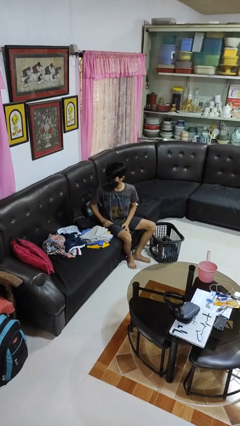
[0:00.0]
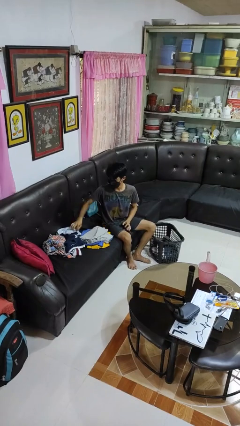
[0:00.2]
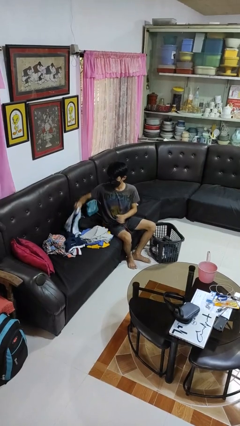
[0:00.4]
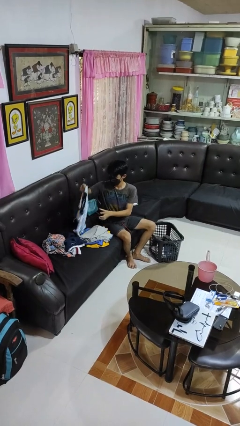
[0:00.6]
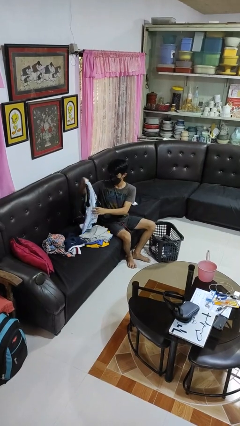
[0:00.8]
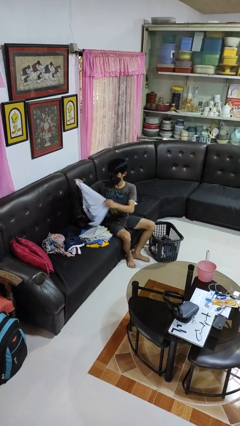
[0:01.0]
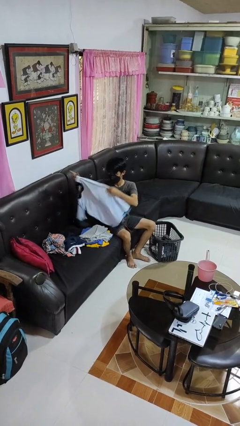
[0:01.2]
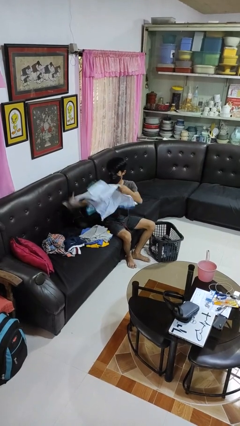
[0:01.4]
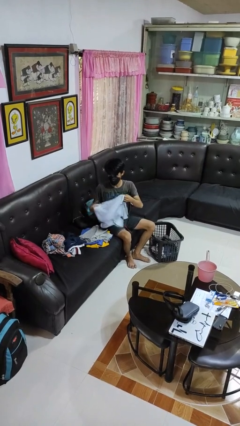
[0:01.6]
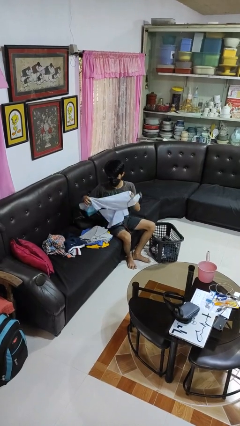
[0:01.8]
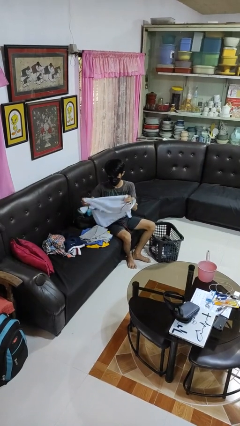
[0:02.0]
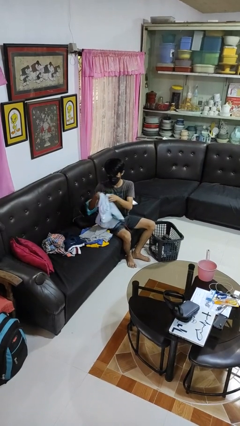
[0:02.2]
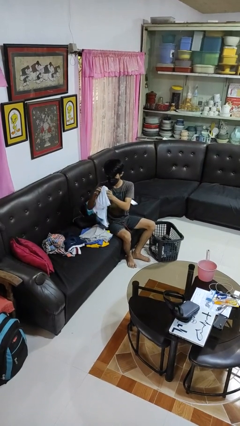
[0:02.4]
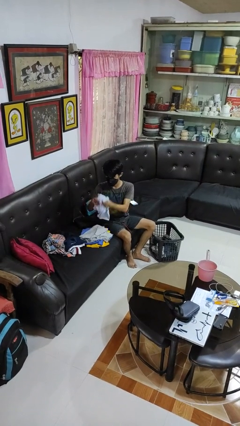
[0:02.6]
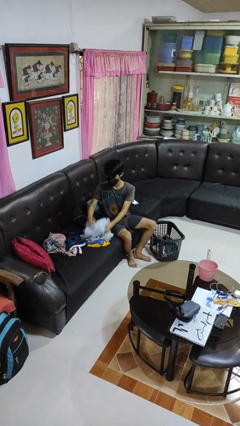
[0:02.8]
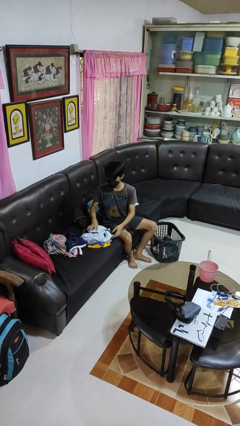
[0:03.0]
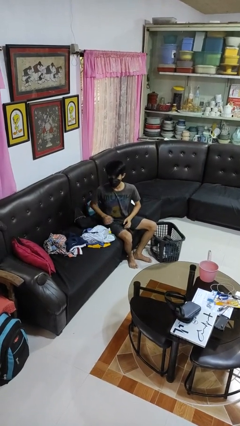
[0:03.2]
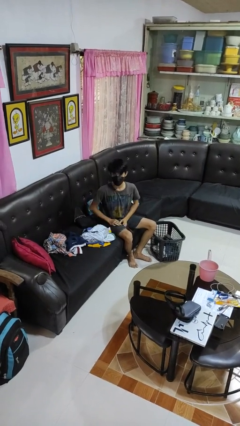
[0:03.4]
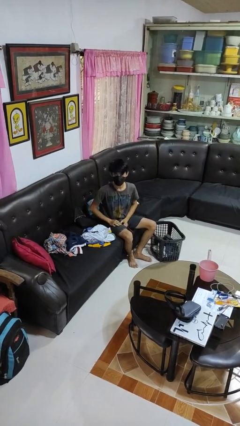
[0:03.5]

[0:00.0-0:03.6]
person folds shirt

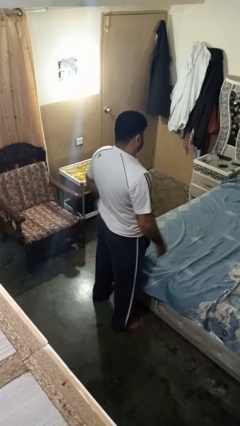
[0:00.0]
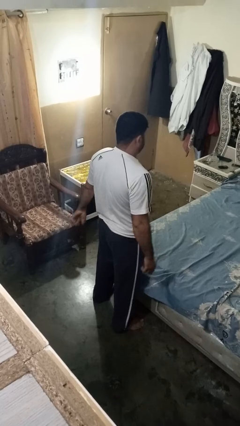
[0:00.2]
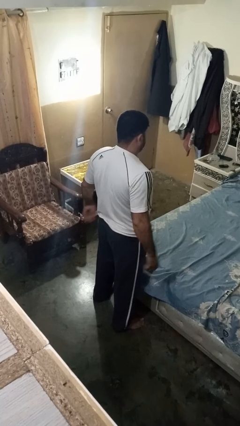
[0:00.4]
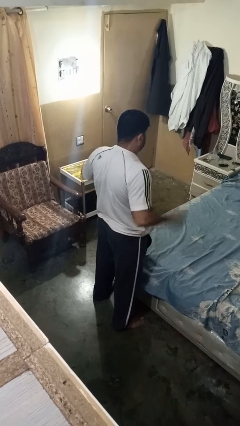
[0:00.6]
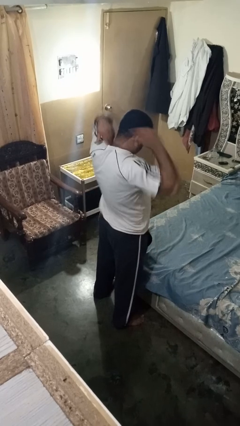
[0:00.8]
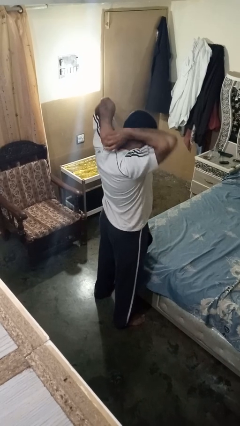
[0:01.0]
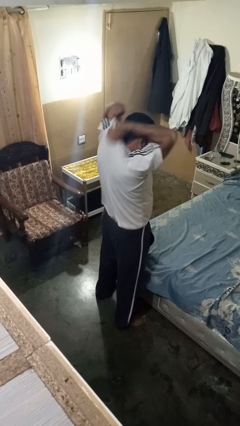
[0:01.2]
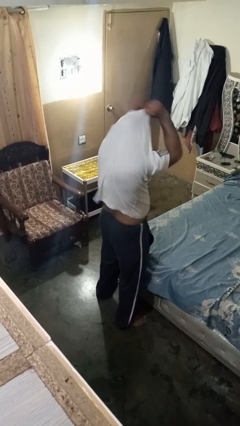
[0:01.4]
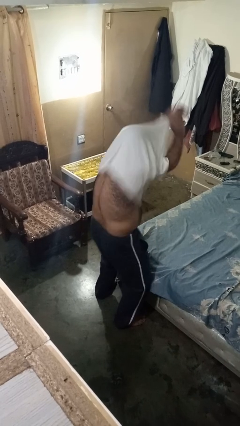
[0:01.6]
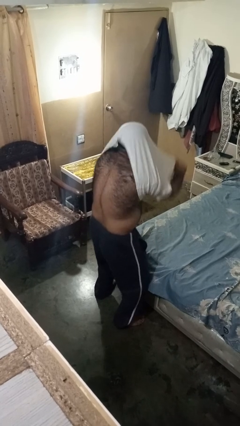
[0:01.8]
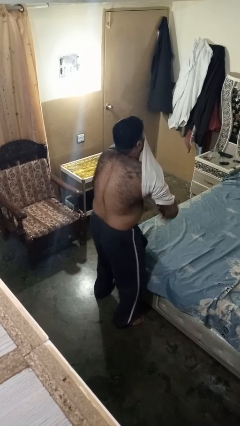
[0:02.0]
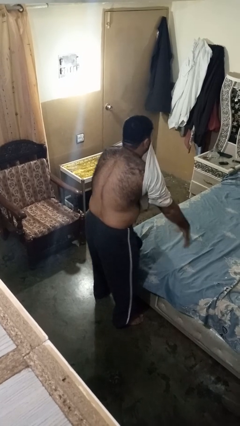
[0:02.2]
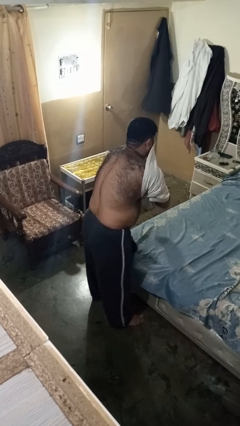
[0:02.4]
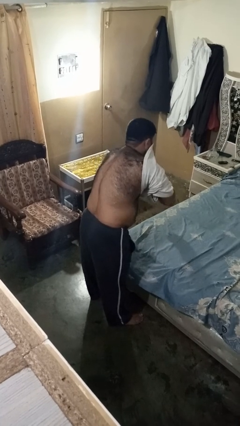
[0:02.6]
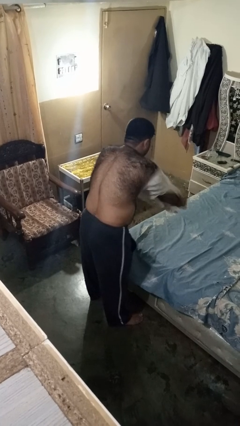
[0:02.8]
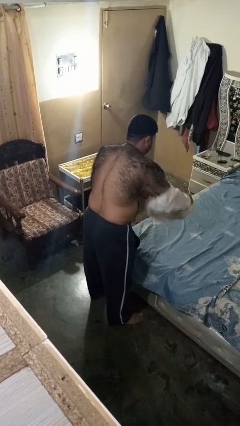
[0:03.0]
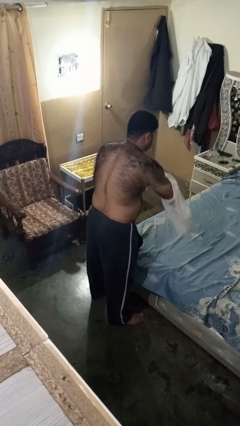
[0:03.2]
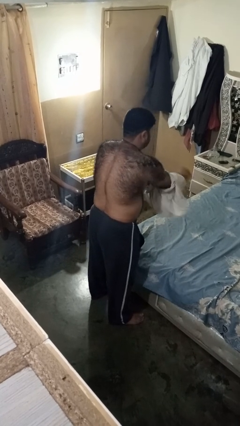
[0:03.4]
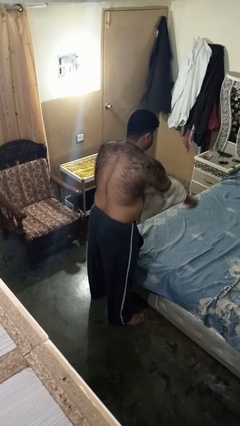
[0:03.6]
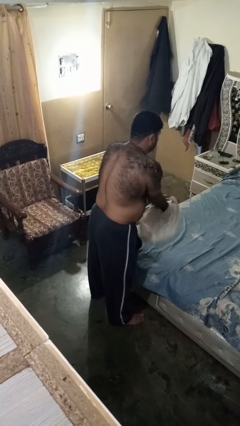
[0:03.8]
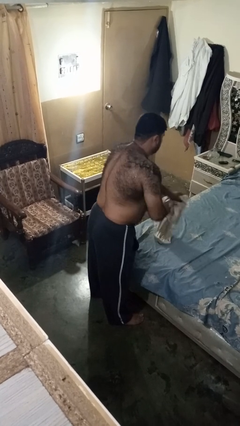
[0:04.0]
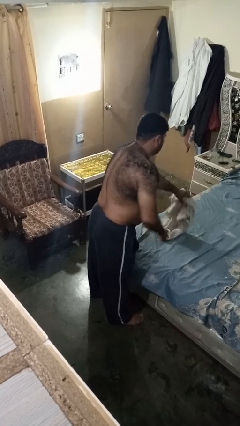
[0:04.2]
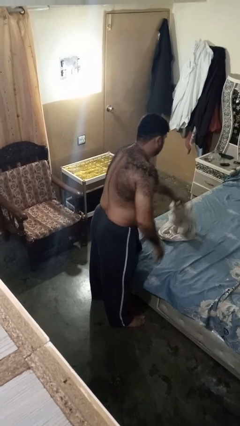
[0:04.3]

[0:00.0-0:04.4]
person takes off shirt

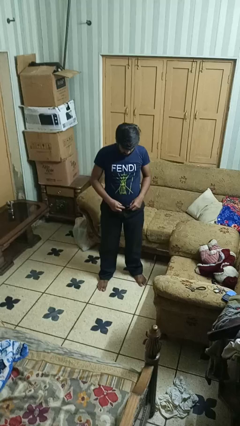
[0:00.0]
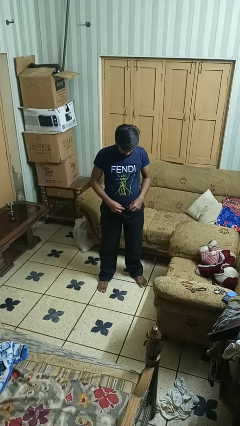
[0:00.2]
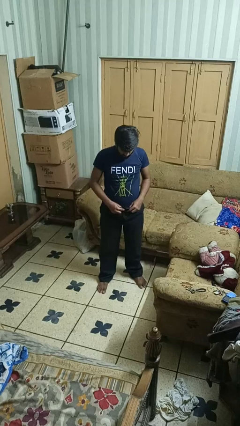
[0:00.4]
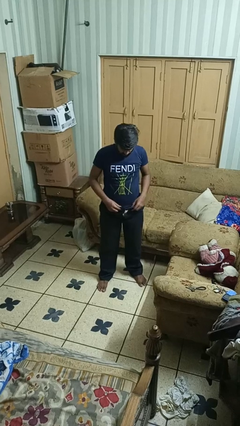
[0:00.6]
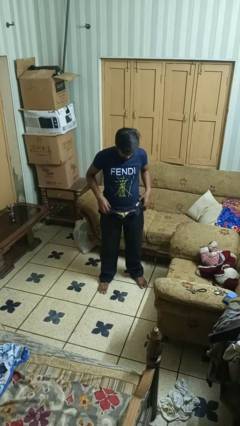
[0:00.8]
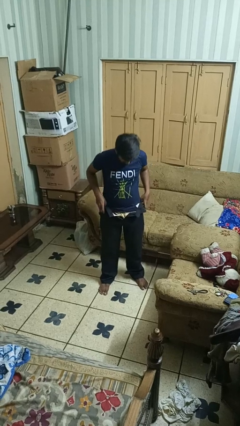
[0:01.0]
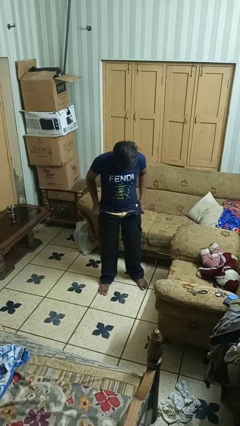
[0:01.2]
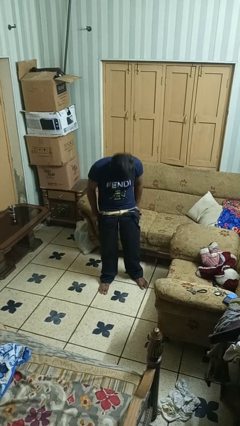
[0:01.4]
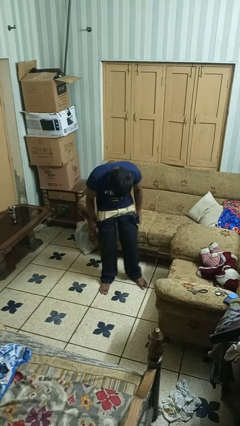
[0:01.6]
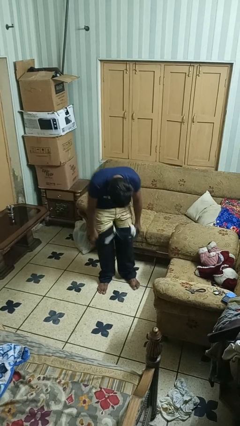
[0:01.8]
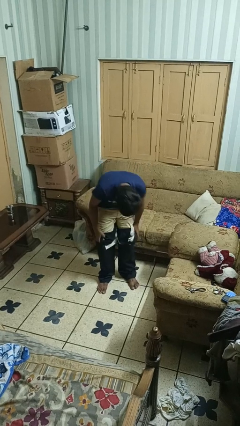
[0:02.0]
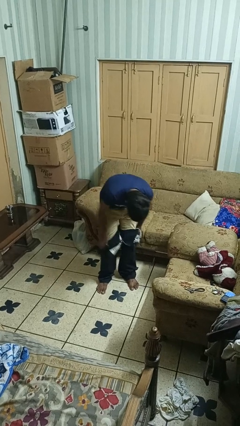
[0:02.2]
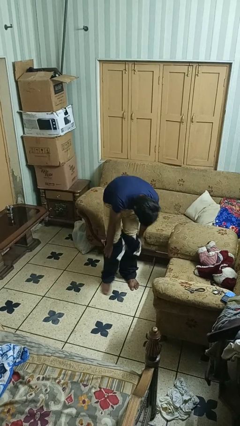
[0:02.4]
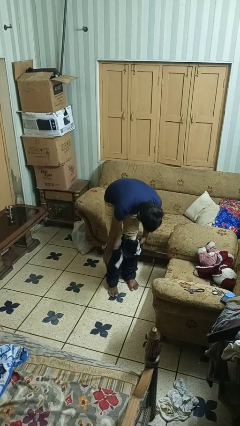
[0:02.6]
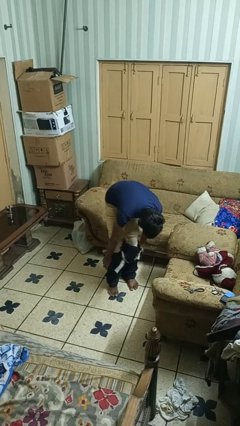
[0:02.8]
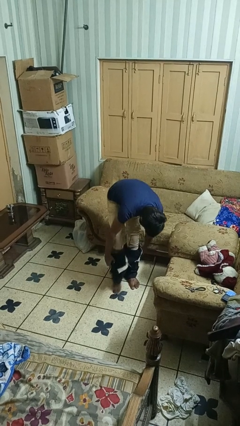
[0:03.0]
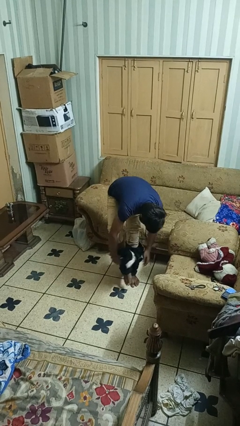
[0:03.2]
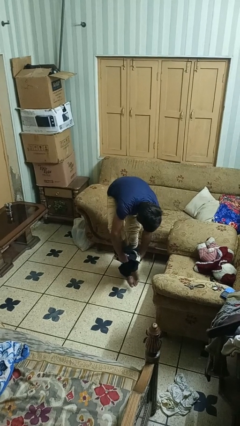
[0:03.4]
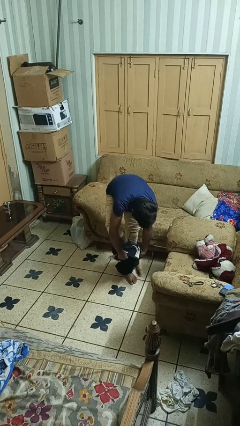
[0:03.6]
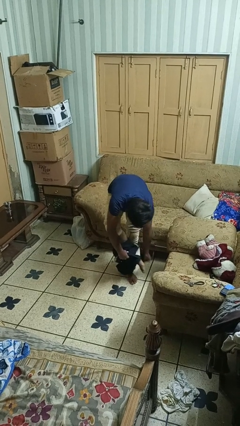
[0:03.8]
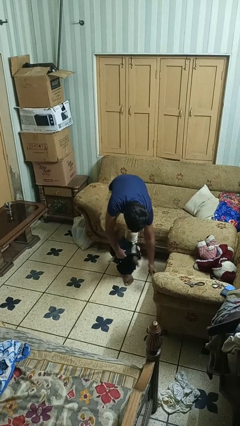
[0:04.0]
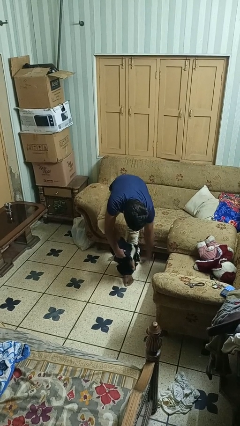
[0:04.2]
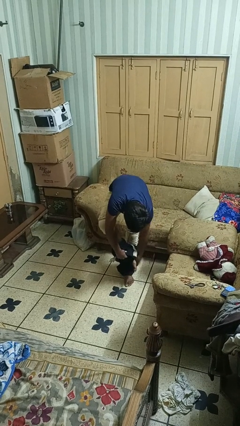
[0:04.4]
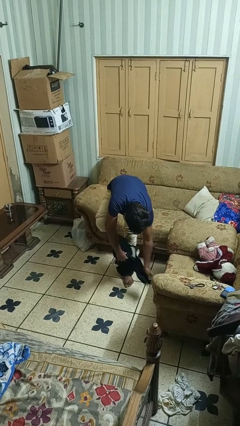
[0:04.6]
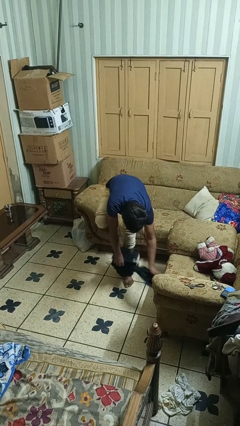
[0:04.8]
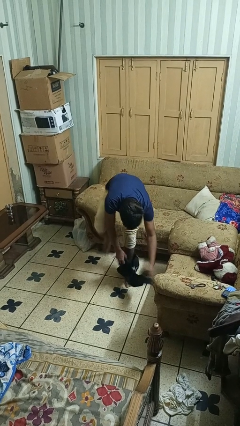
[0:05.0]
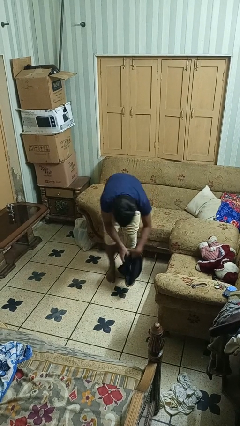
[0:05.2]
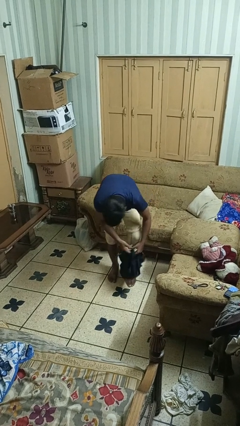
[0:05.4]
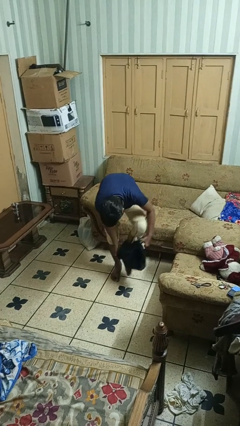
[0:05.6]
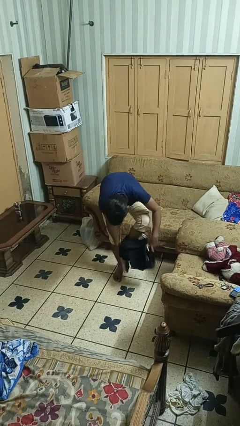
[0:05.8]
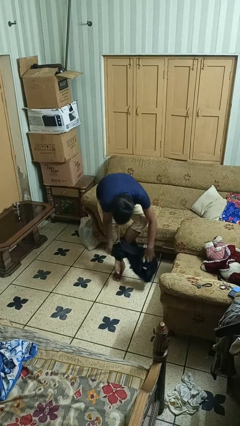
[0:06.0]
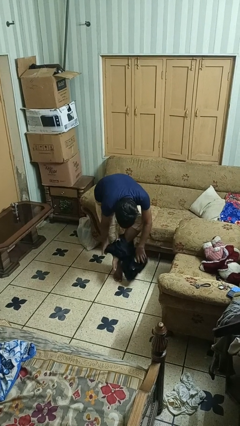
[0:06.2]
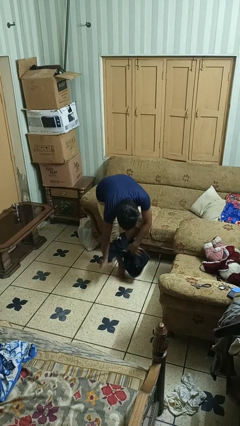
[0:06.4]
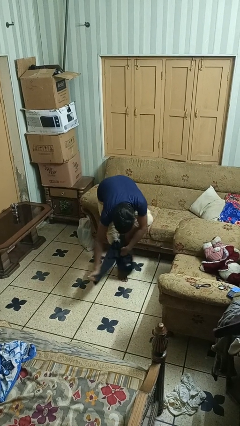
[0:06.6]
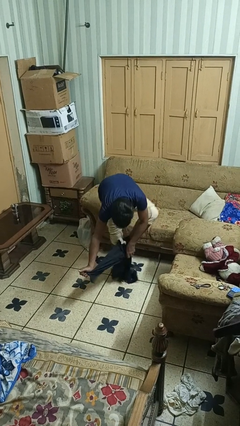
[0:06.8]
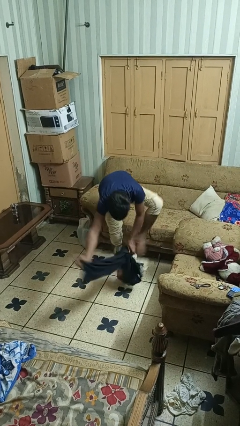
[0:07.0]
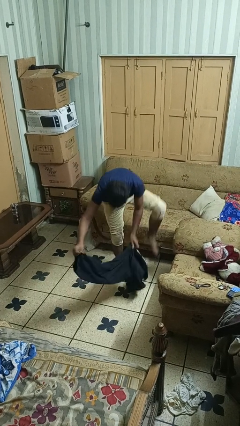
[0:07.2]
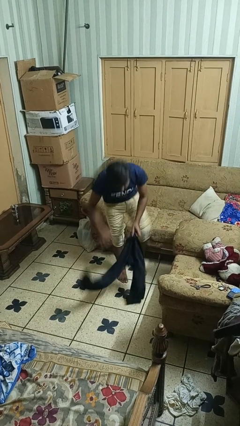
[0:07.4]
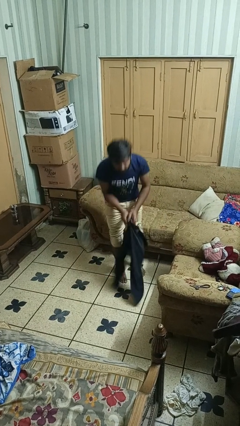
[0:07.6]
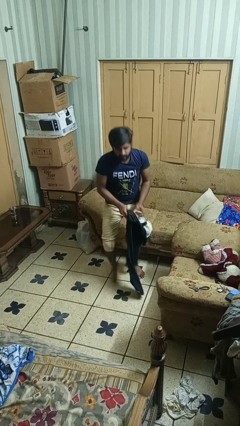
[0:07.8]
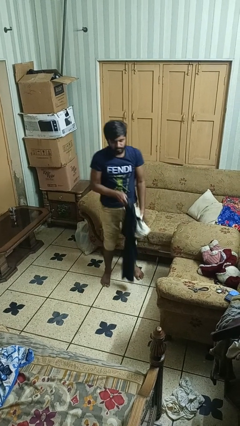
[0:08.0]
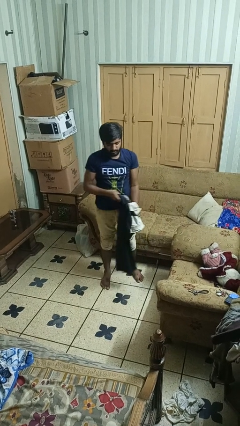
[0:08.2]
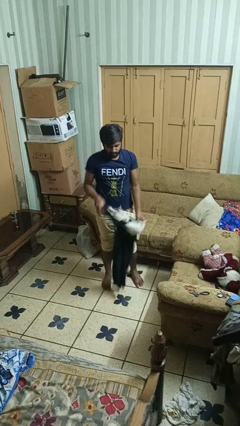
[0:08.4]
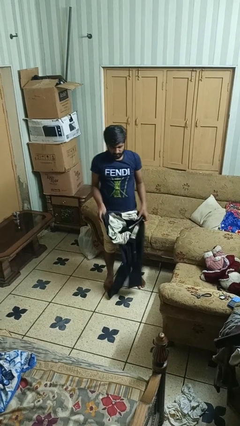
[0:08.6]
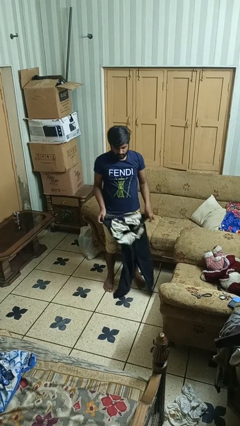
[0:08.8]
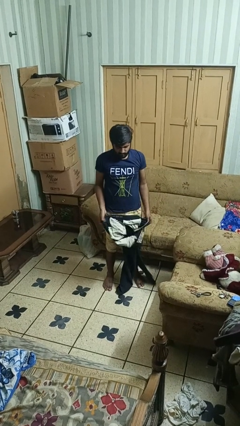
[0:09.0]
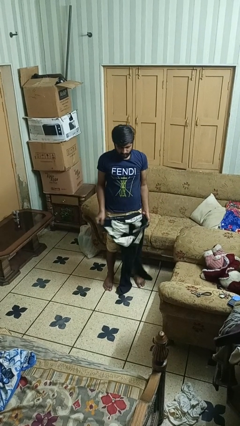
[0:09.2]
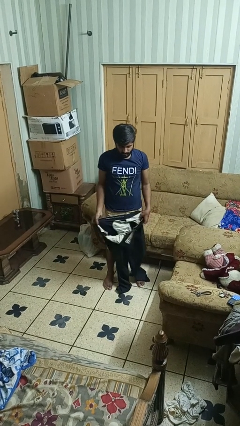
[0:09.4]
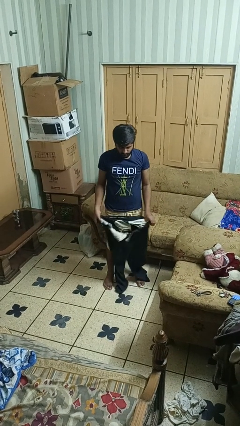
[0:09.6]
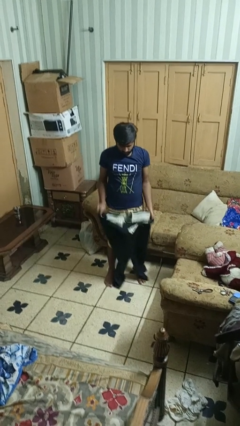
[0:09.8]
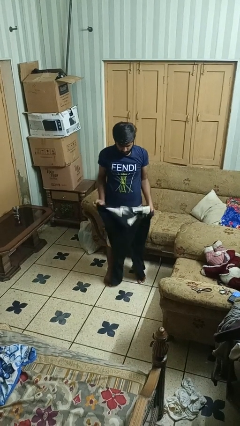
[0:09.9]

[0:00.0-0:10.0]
person takes off pants

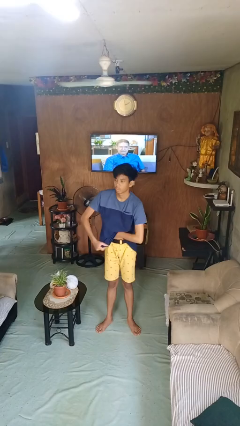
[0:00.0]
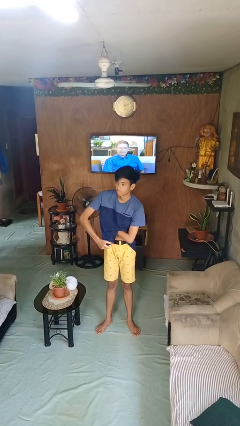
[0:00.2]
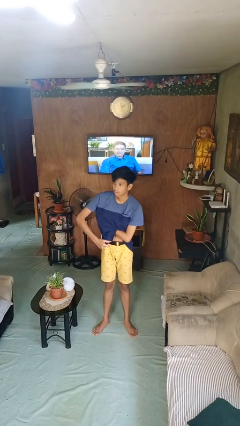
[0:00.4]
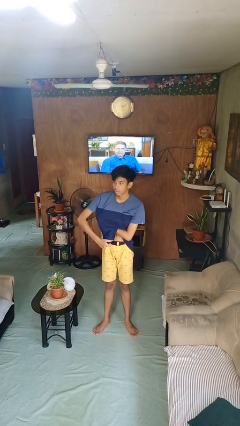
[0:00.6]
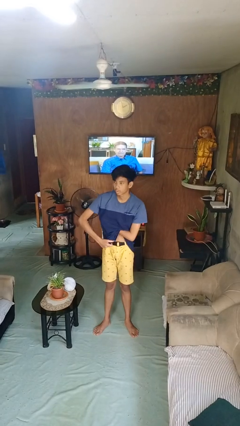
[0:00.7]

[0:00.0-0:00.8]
person applies deodorant
